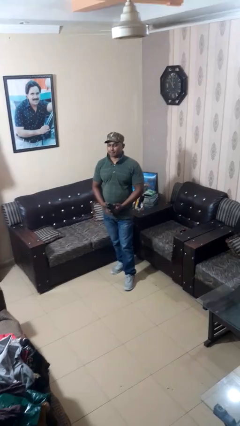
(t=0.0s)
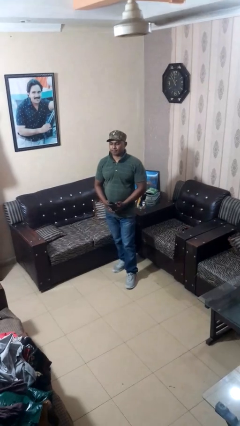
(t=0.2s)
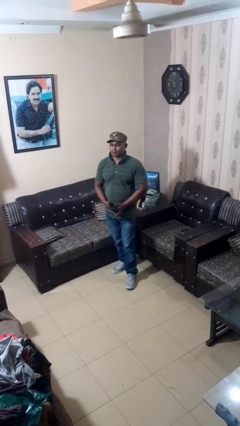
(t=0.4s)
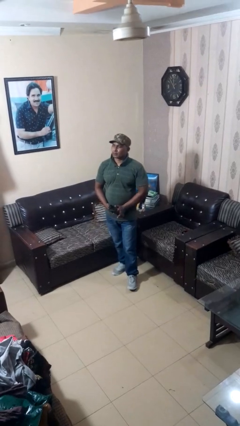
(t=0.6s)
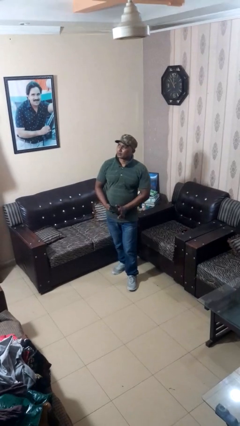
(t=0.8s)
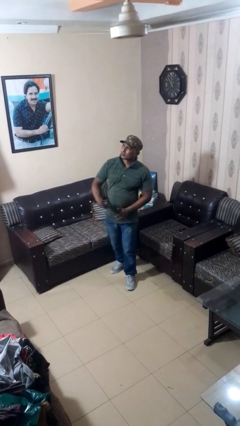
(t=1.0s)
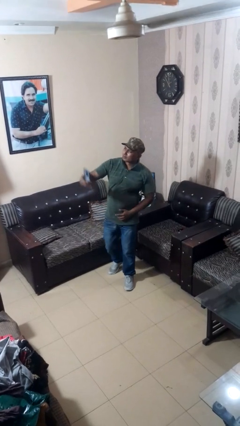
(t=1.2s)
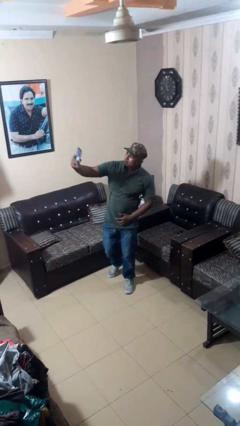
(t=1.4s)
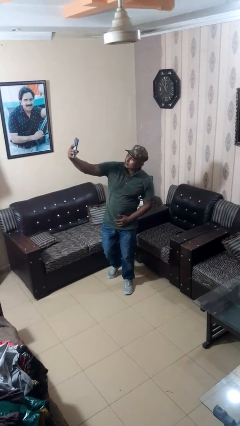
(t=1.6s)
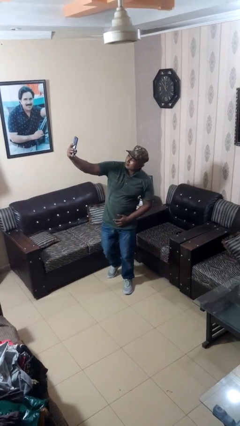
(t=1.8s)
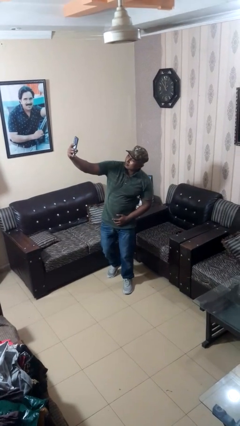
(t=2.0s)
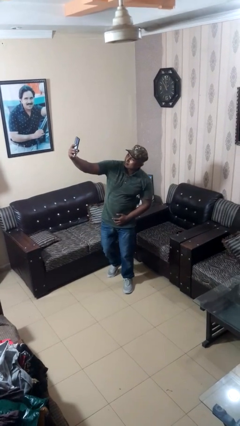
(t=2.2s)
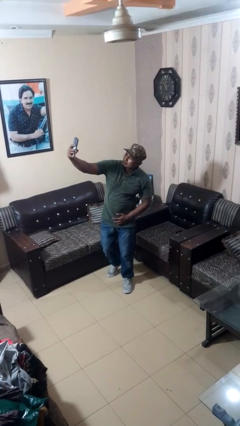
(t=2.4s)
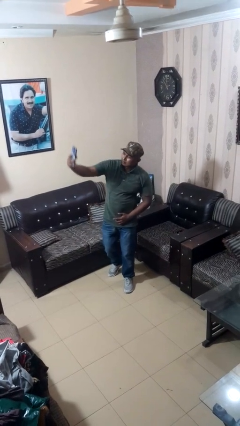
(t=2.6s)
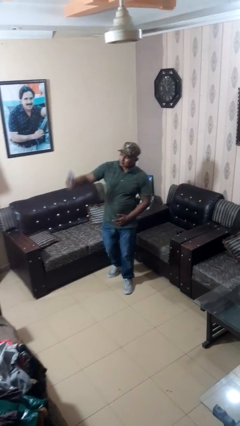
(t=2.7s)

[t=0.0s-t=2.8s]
person takes selfie

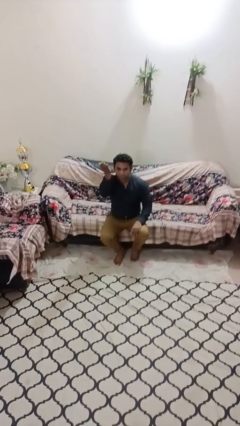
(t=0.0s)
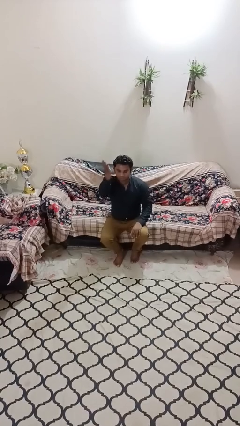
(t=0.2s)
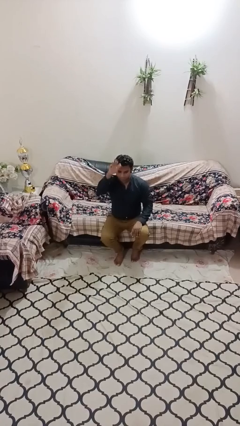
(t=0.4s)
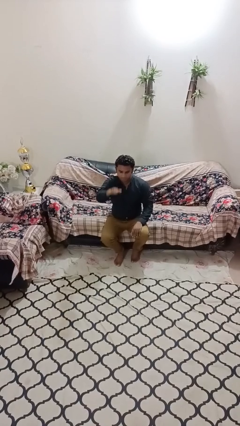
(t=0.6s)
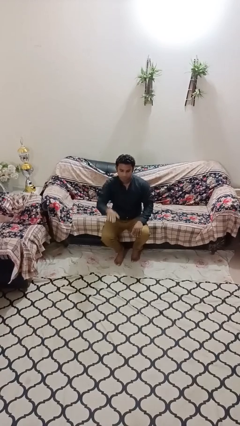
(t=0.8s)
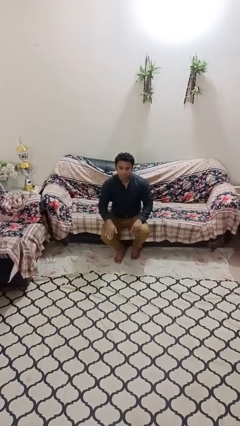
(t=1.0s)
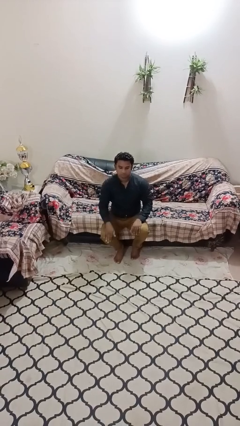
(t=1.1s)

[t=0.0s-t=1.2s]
person gestures swipe down

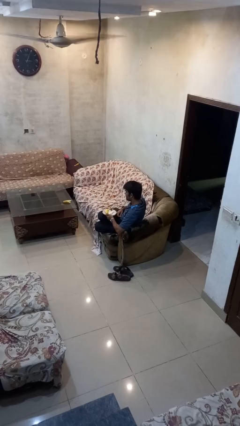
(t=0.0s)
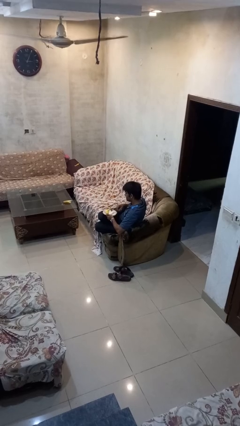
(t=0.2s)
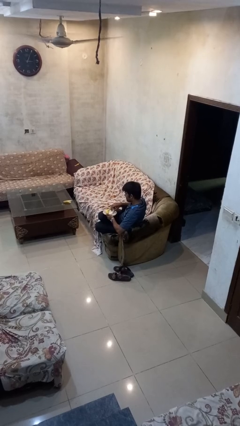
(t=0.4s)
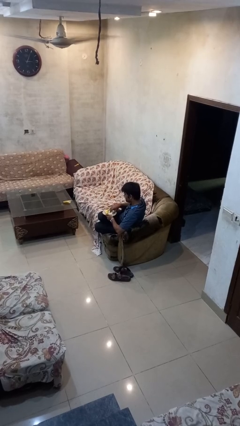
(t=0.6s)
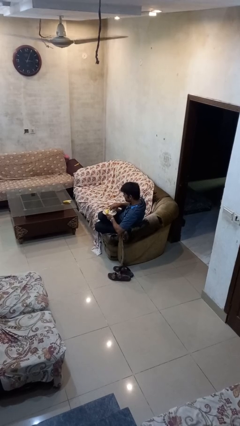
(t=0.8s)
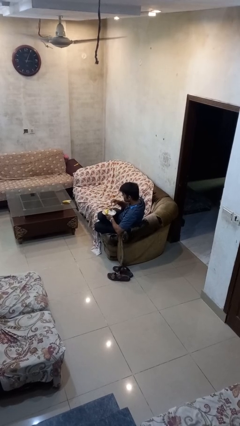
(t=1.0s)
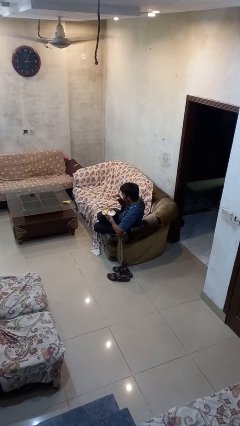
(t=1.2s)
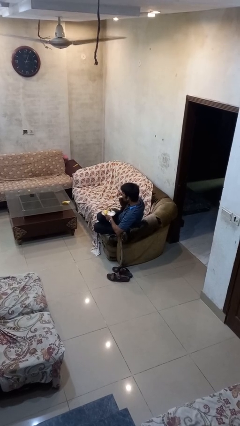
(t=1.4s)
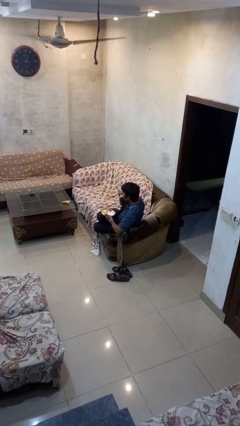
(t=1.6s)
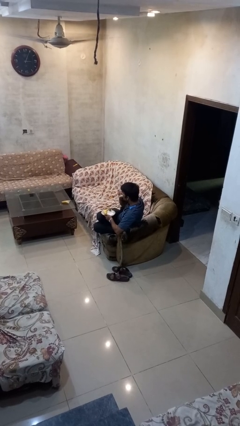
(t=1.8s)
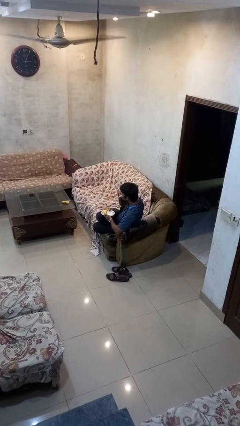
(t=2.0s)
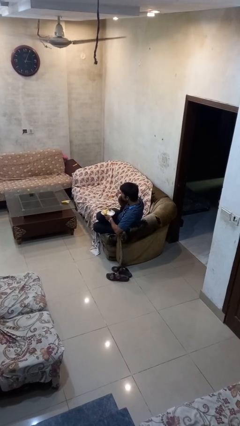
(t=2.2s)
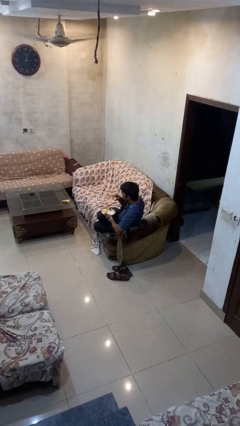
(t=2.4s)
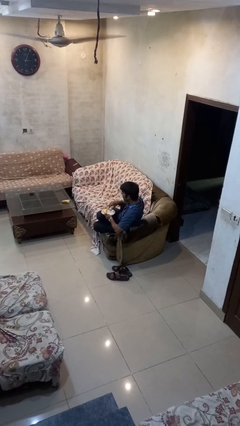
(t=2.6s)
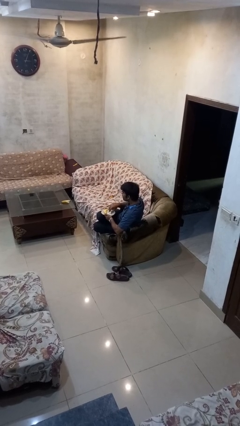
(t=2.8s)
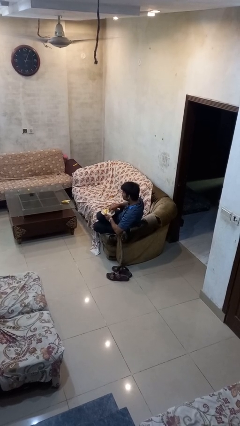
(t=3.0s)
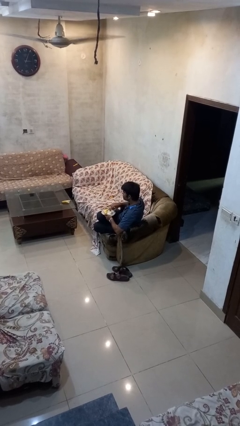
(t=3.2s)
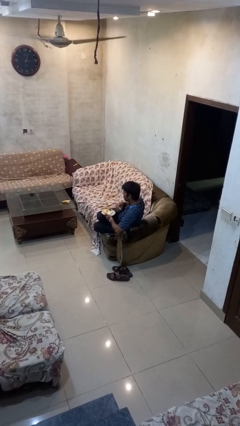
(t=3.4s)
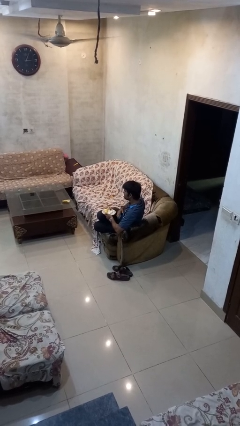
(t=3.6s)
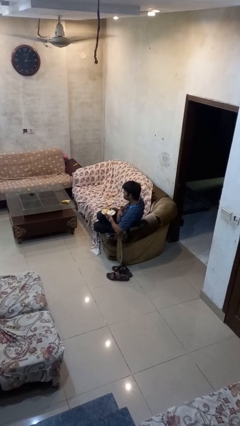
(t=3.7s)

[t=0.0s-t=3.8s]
person eats with hands

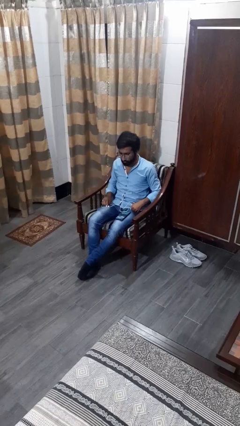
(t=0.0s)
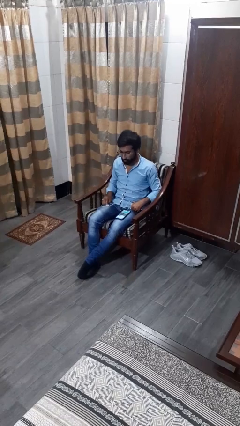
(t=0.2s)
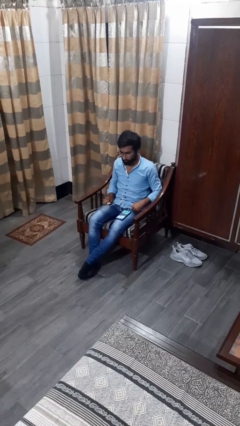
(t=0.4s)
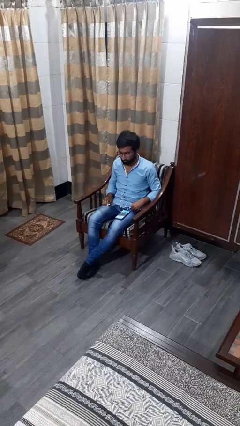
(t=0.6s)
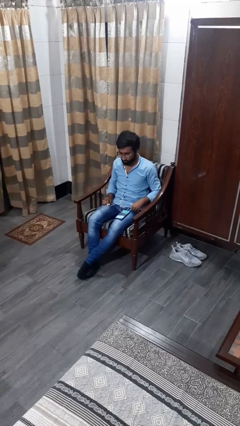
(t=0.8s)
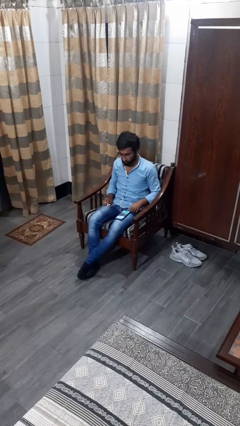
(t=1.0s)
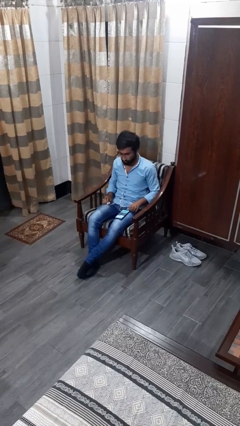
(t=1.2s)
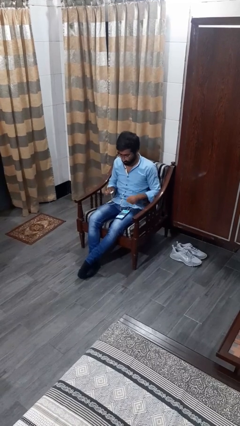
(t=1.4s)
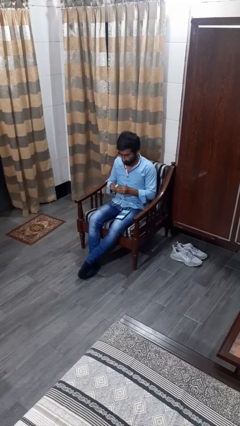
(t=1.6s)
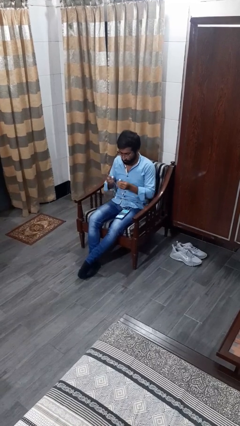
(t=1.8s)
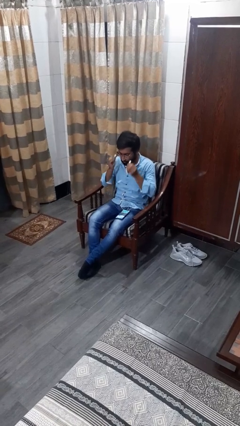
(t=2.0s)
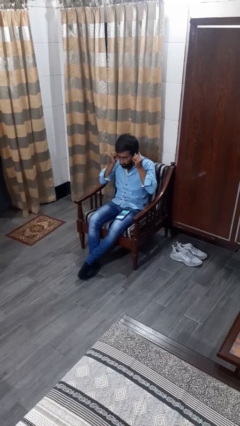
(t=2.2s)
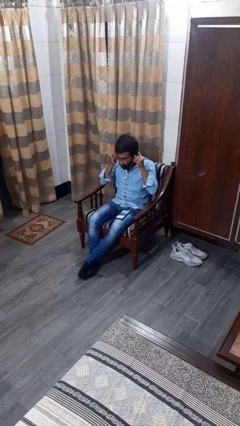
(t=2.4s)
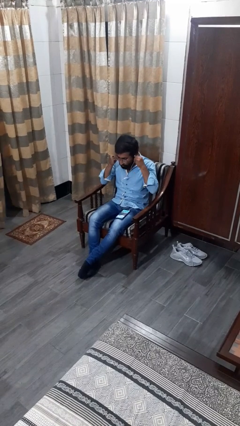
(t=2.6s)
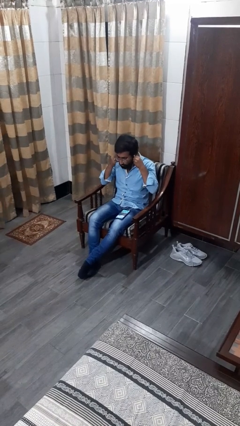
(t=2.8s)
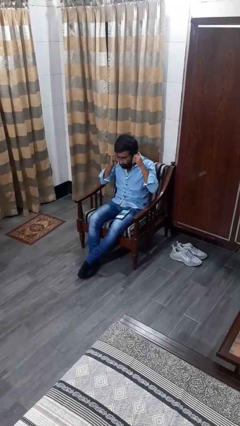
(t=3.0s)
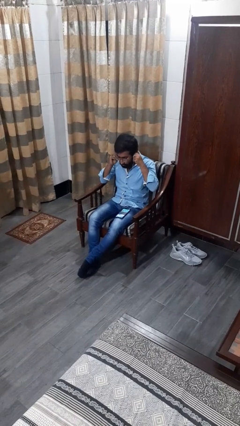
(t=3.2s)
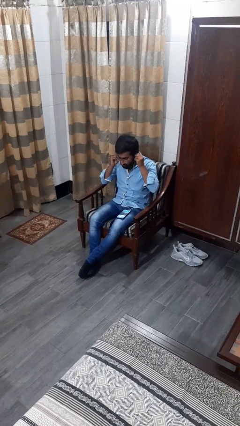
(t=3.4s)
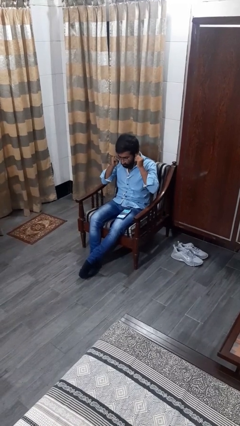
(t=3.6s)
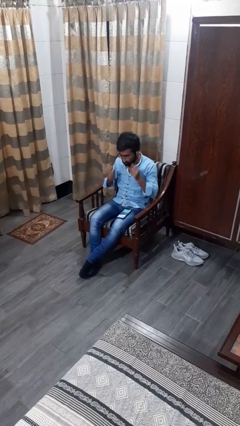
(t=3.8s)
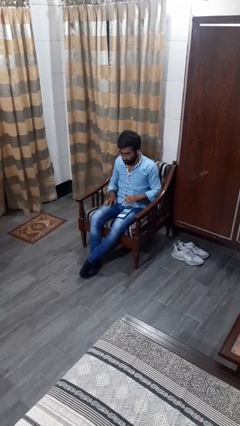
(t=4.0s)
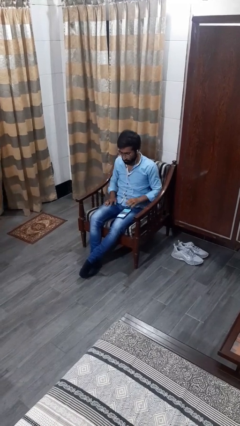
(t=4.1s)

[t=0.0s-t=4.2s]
person puts on headphones

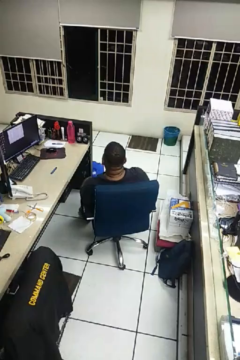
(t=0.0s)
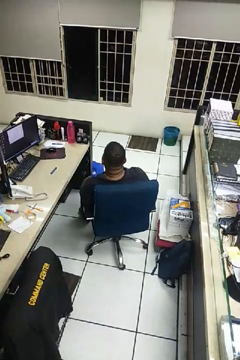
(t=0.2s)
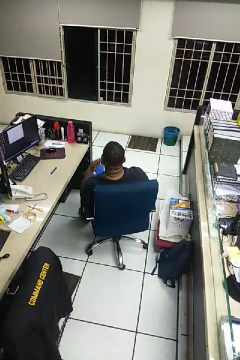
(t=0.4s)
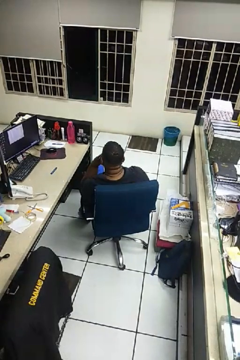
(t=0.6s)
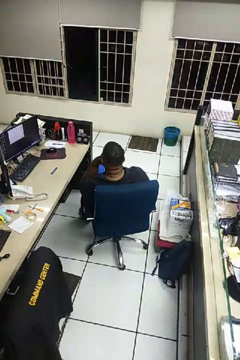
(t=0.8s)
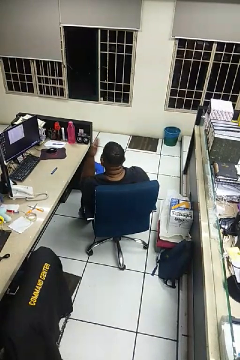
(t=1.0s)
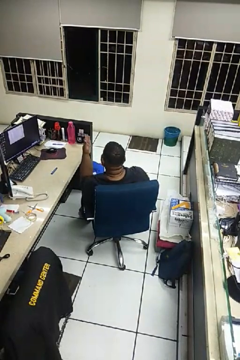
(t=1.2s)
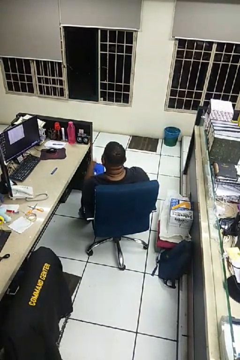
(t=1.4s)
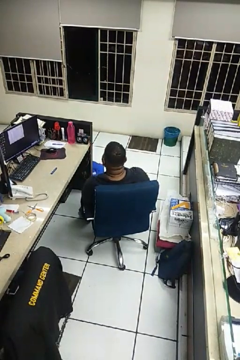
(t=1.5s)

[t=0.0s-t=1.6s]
person gestures blow kiss

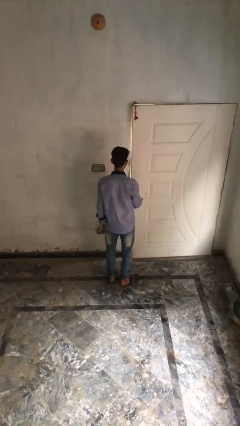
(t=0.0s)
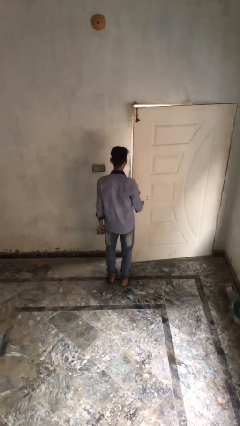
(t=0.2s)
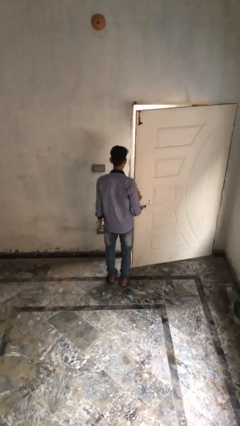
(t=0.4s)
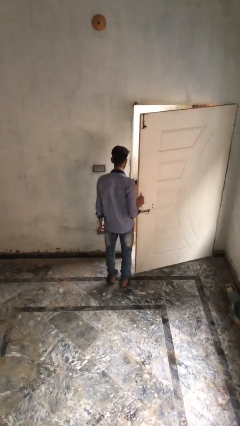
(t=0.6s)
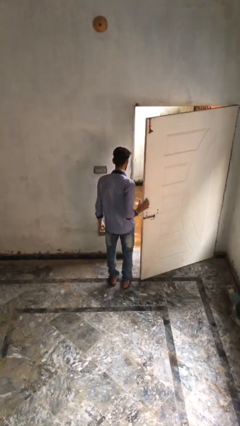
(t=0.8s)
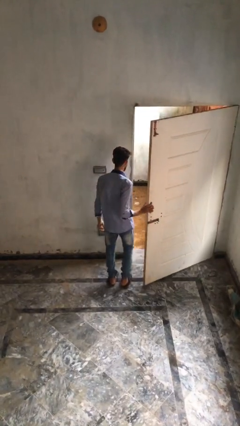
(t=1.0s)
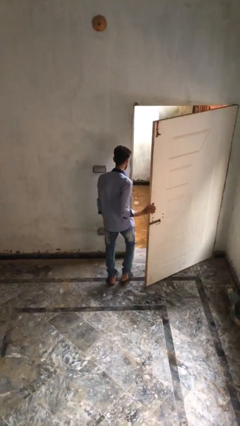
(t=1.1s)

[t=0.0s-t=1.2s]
person opens facility door

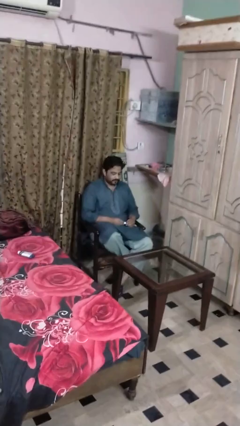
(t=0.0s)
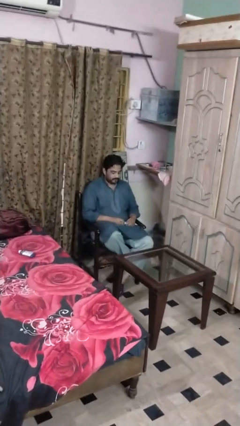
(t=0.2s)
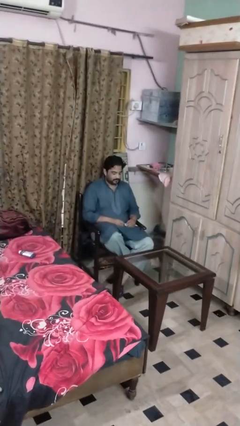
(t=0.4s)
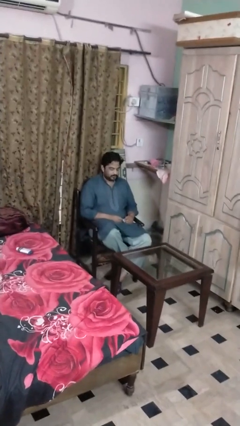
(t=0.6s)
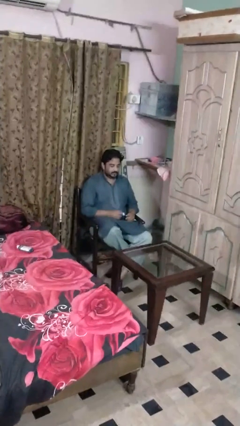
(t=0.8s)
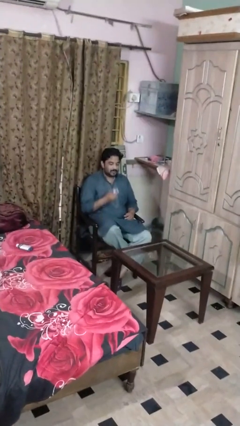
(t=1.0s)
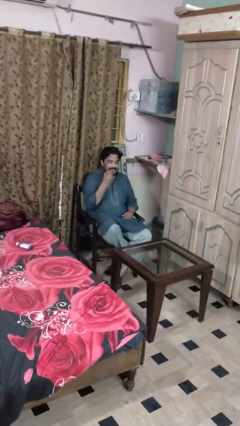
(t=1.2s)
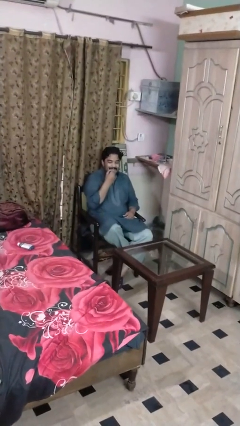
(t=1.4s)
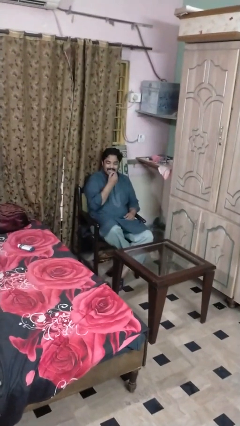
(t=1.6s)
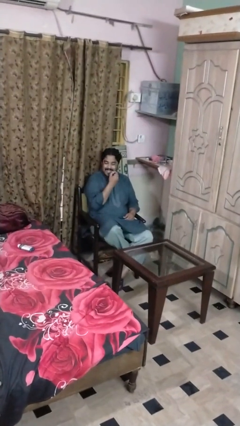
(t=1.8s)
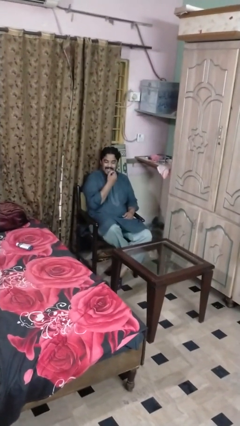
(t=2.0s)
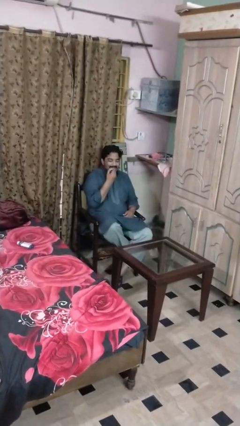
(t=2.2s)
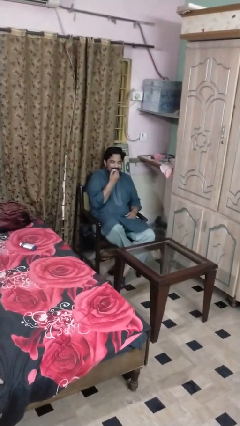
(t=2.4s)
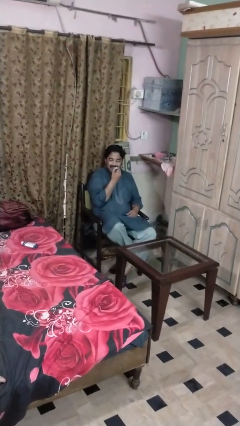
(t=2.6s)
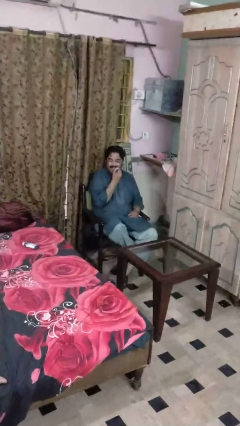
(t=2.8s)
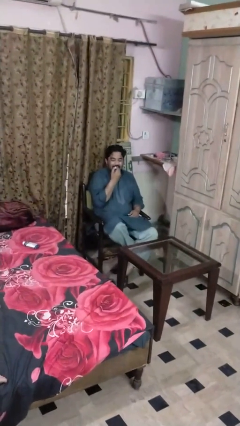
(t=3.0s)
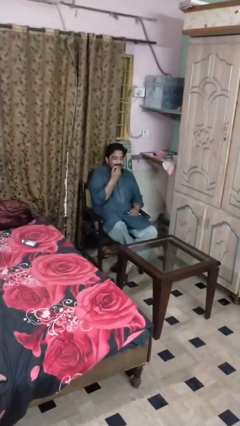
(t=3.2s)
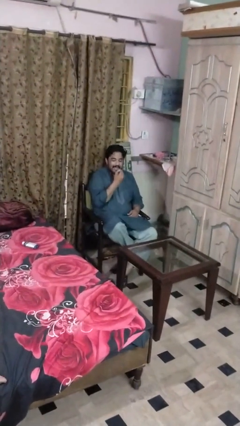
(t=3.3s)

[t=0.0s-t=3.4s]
person applies lip makeup
